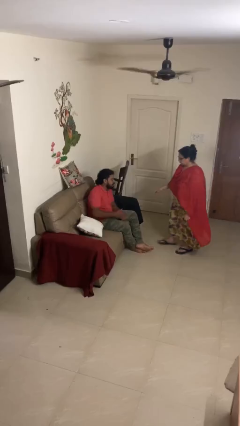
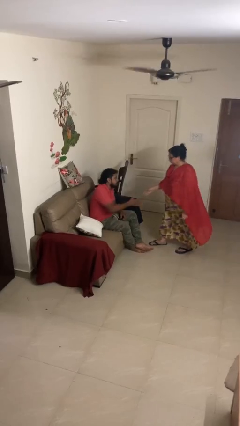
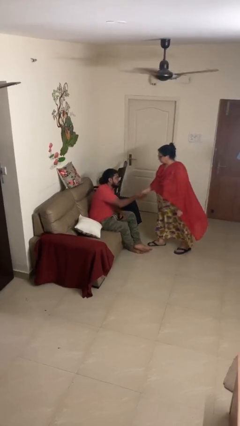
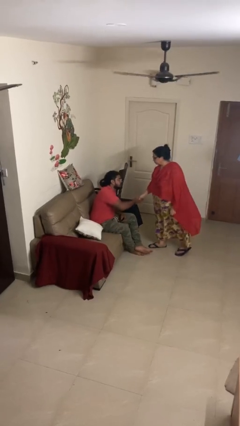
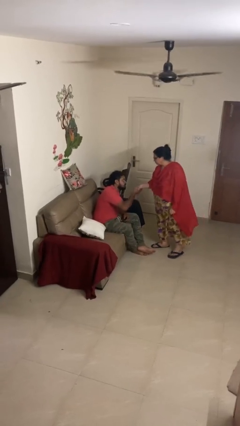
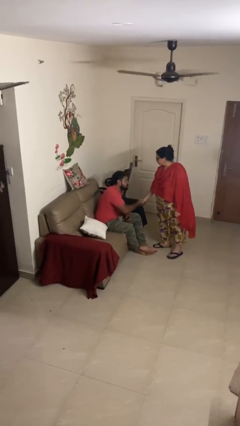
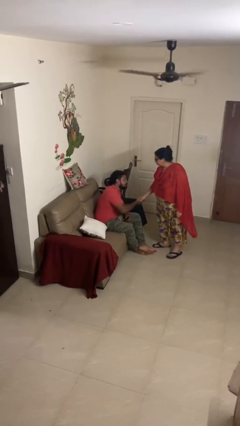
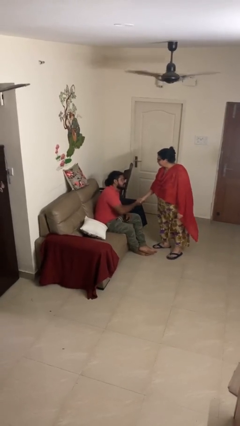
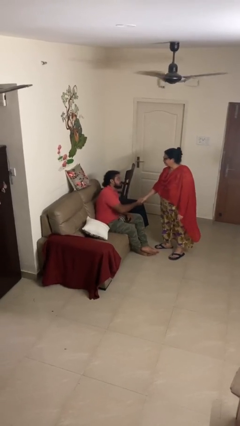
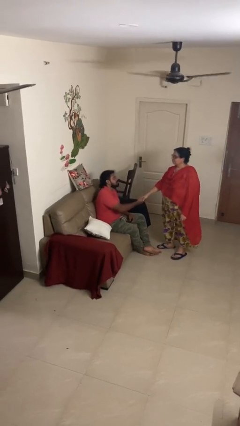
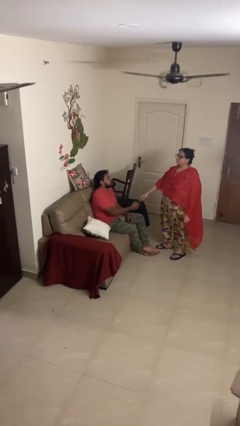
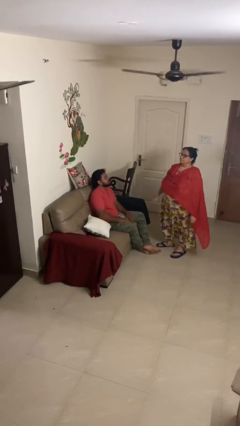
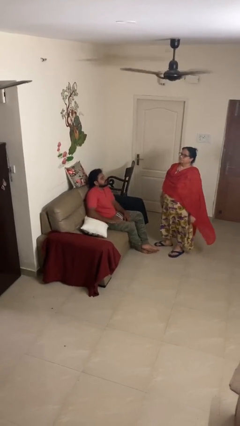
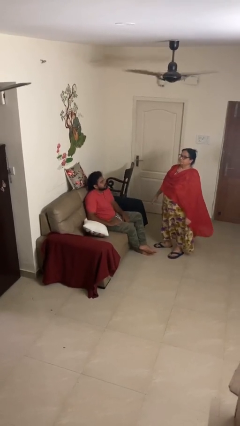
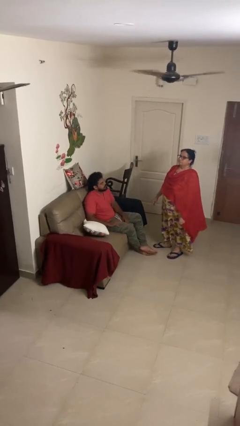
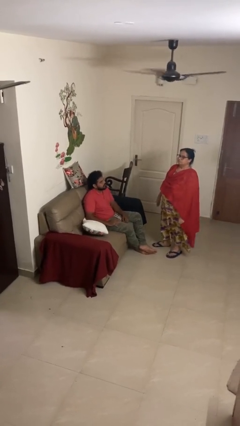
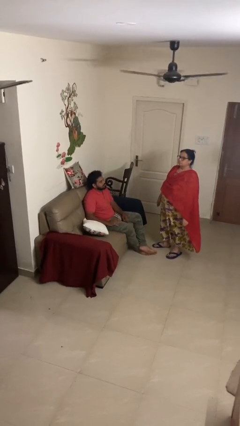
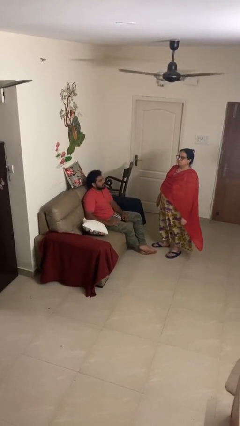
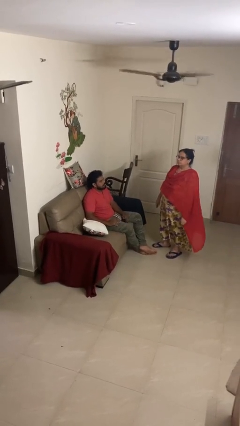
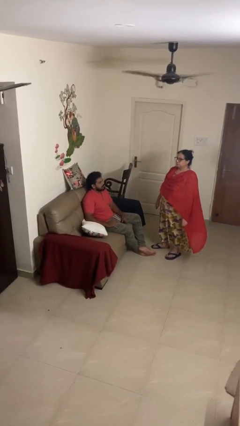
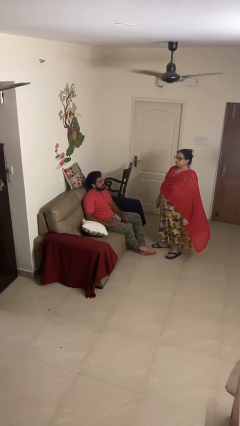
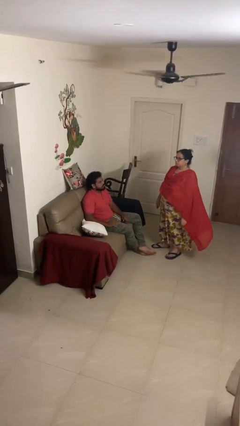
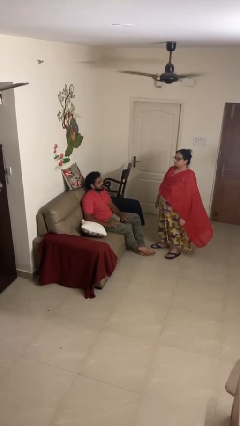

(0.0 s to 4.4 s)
person shakes hand

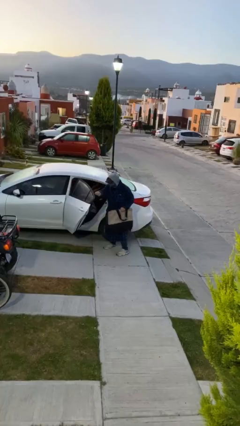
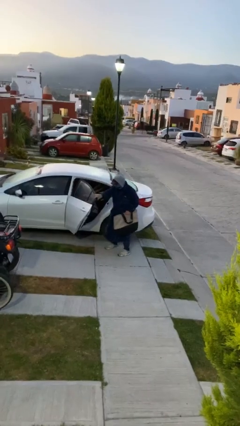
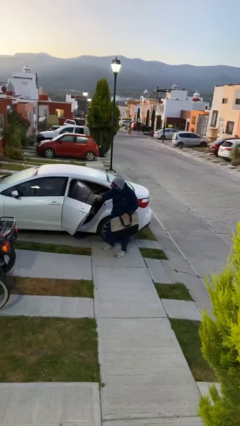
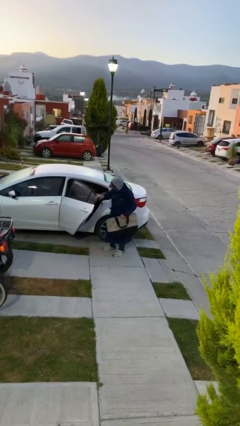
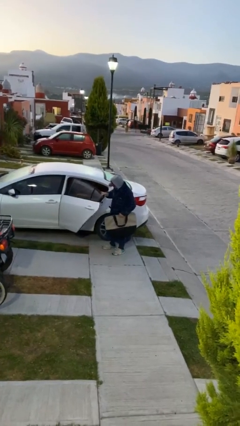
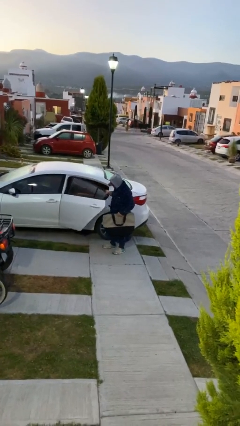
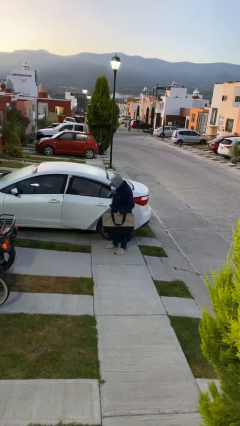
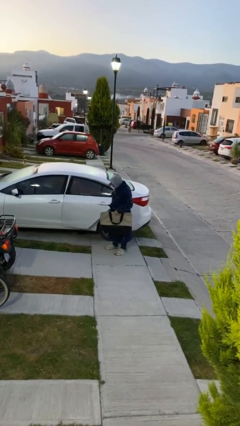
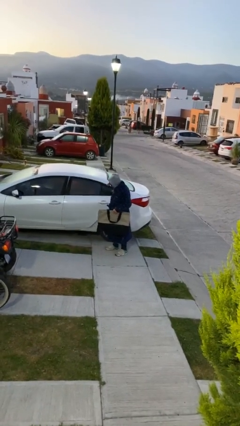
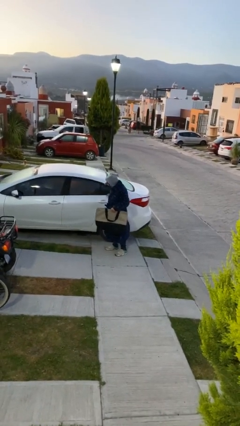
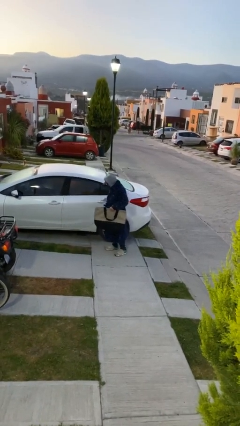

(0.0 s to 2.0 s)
person closes car door

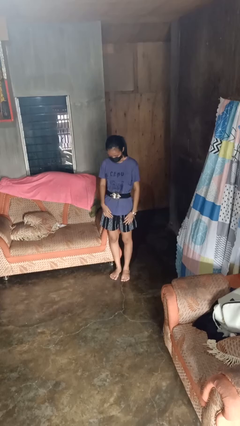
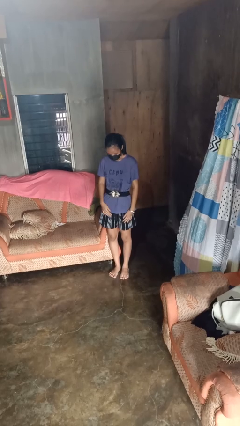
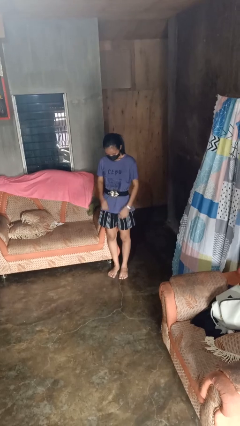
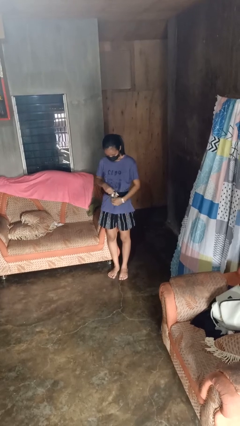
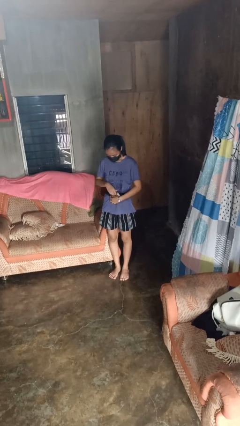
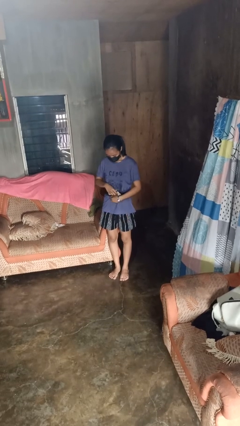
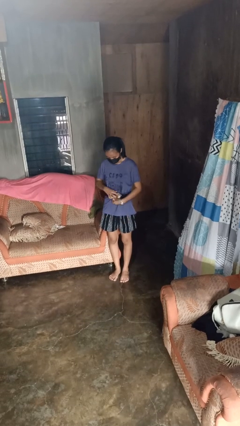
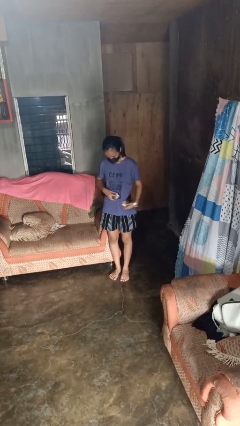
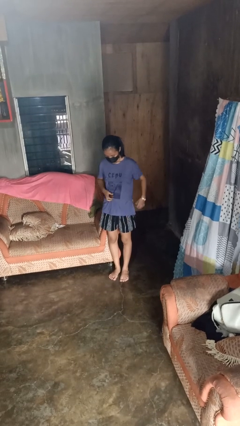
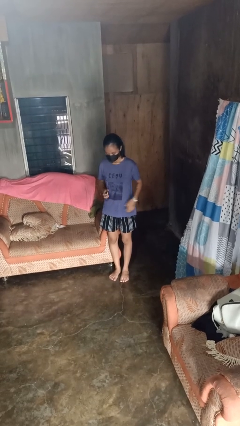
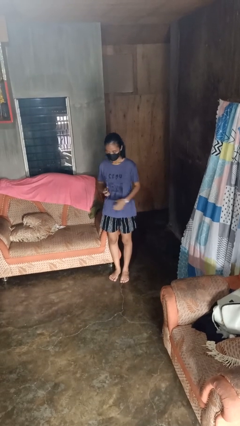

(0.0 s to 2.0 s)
person takes off belt

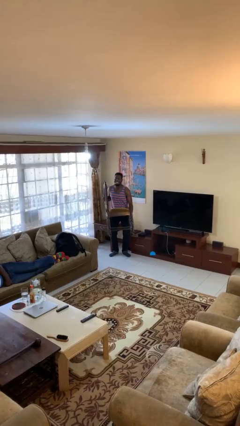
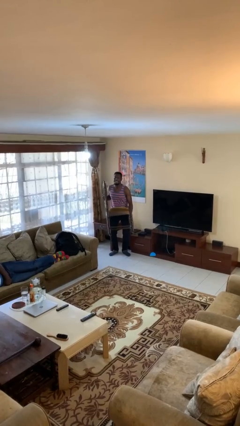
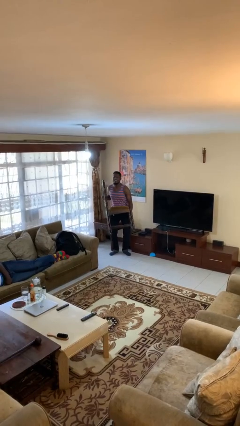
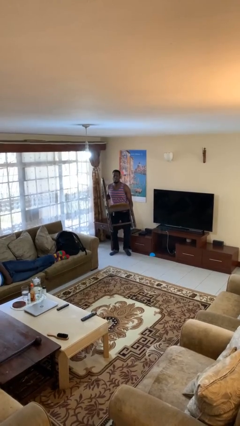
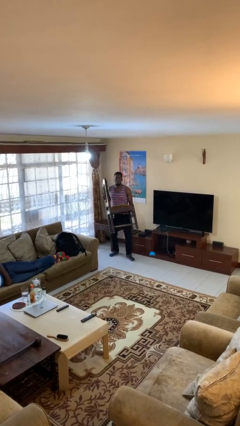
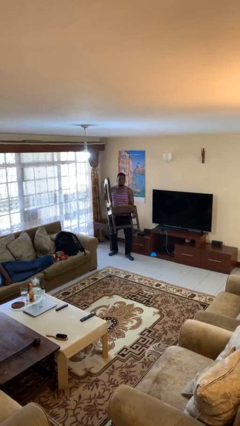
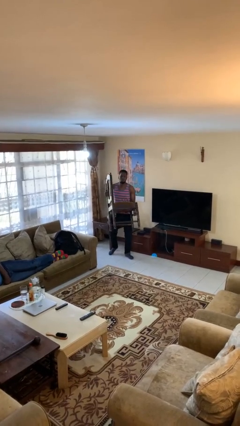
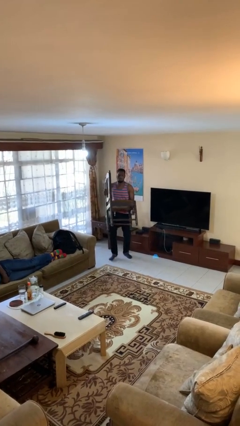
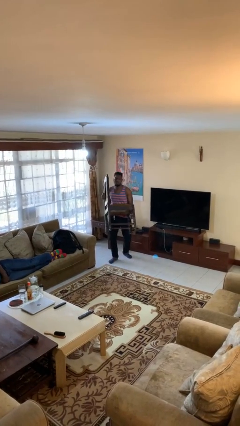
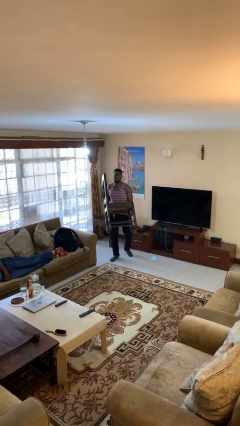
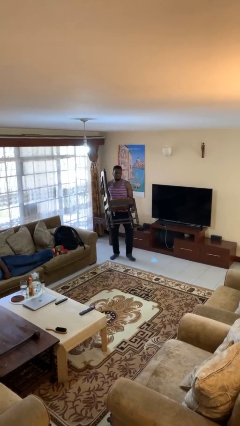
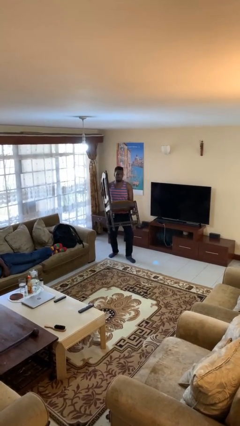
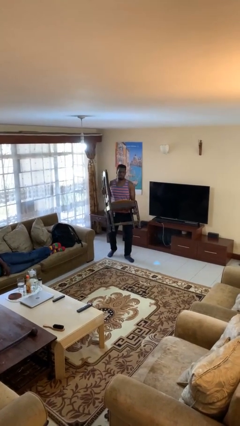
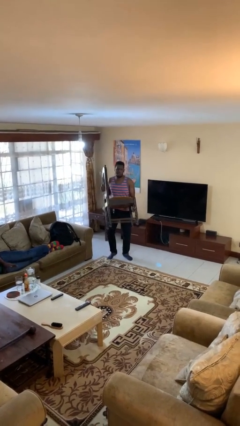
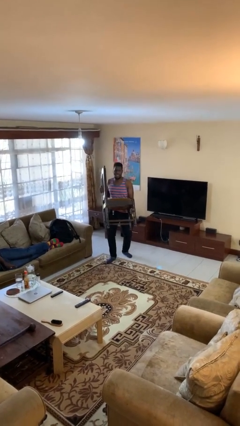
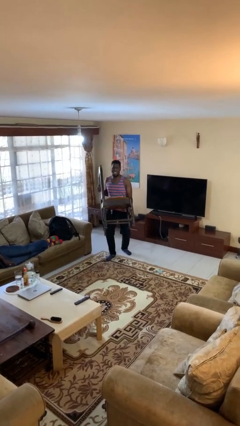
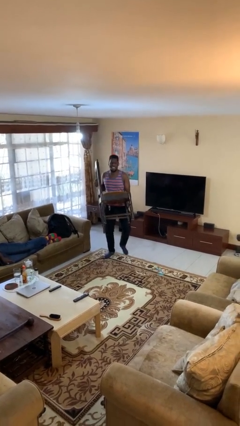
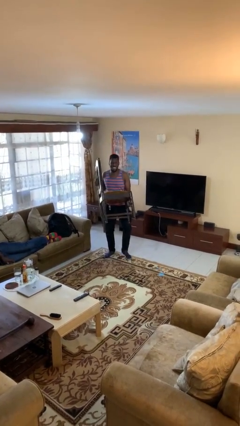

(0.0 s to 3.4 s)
person carries heavy object

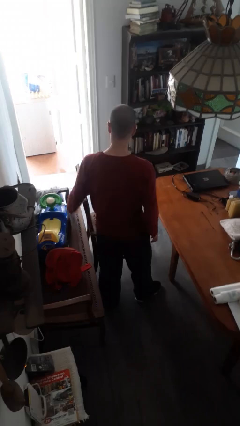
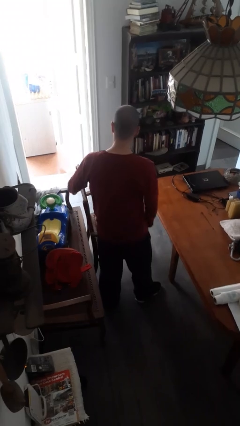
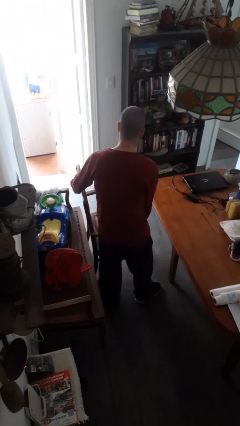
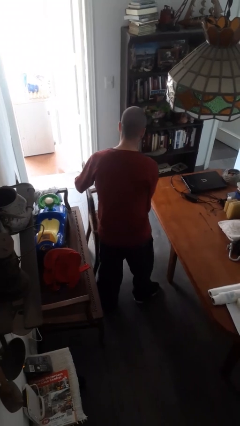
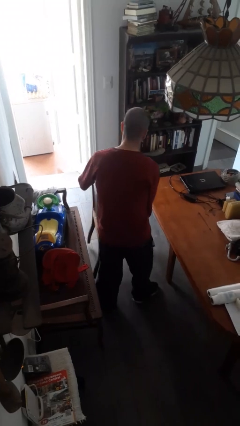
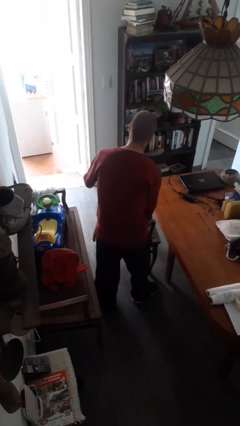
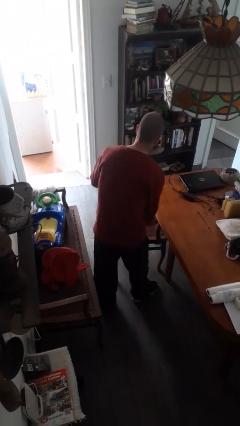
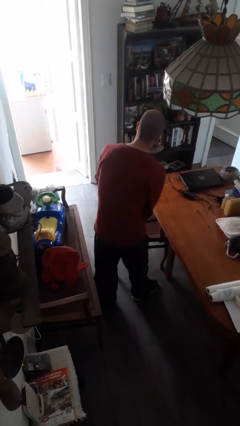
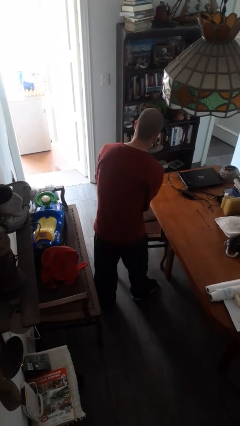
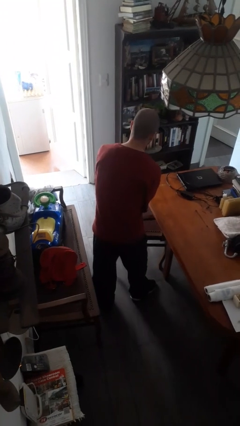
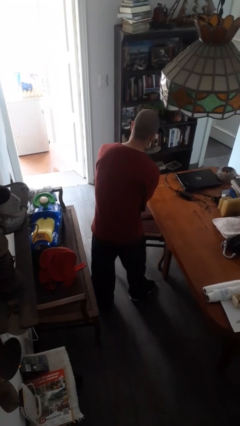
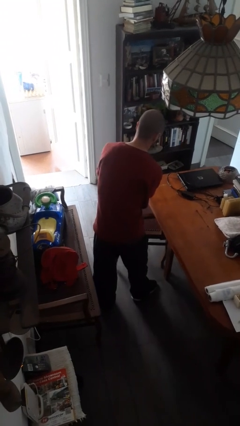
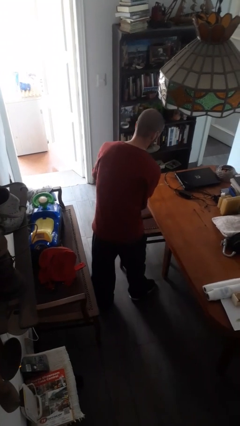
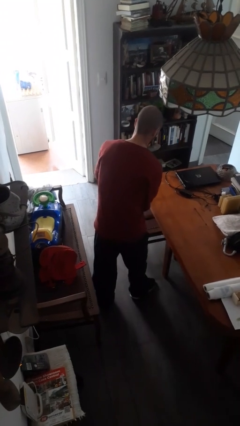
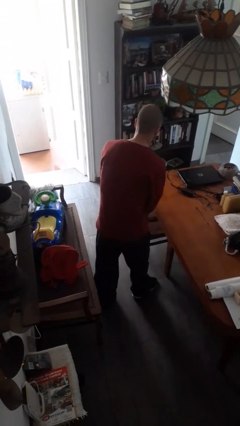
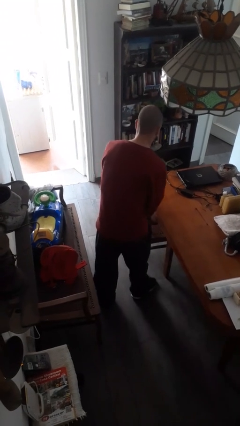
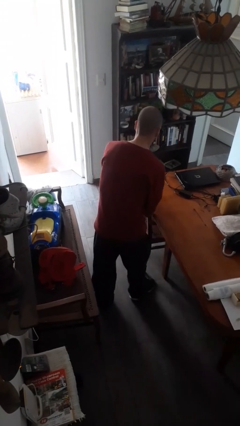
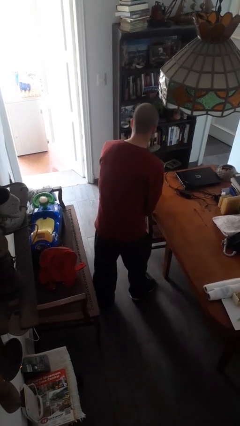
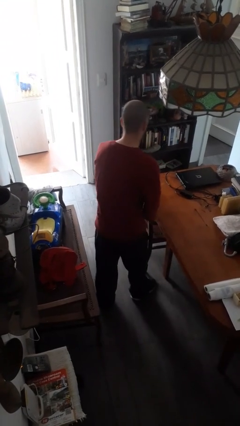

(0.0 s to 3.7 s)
person pushes in chair

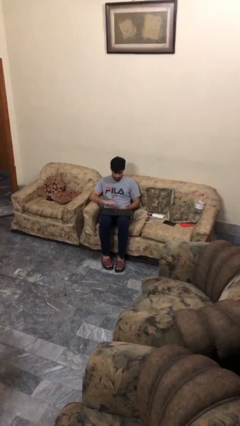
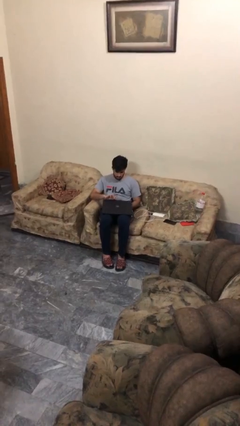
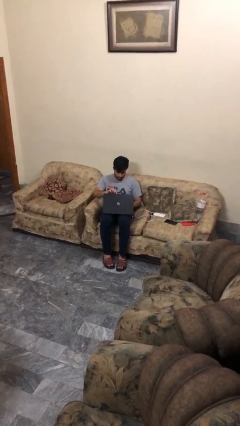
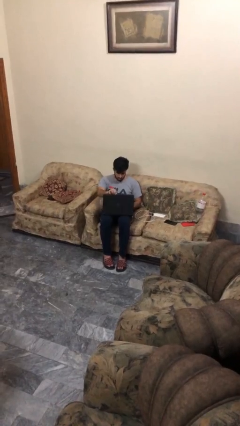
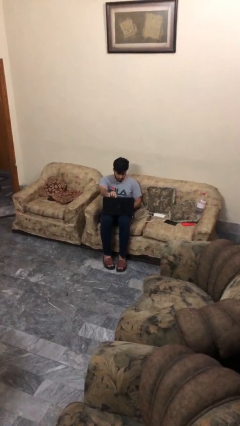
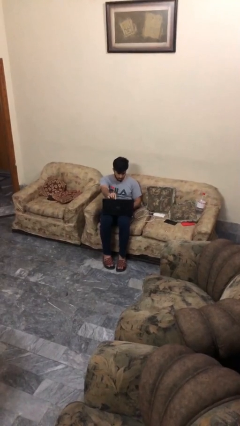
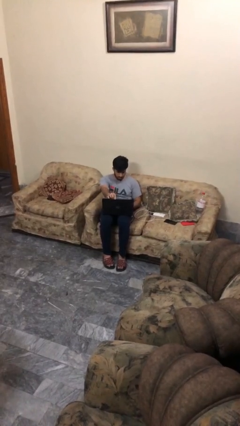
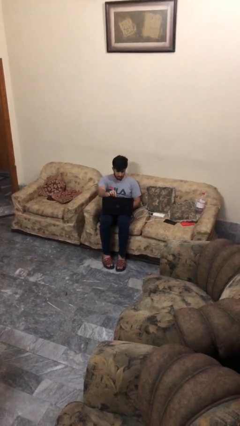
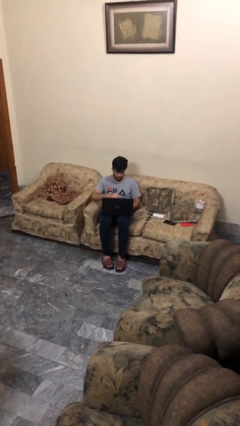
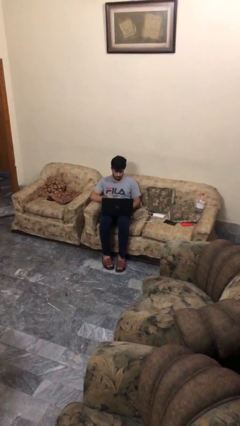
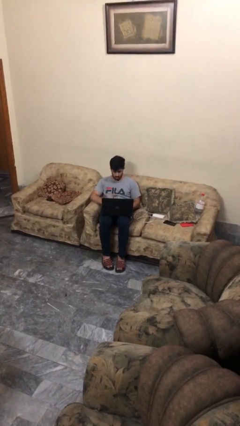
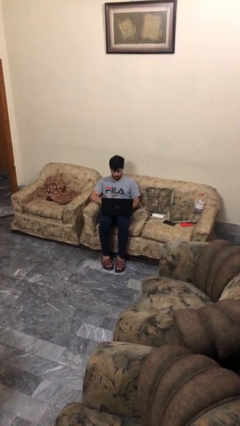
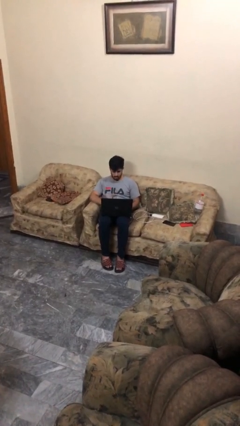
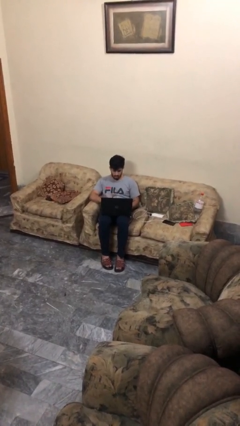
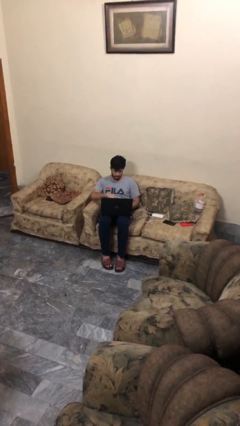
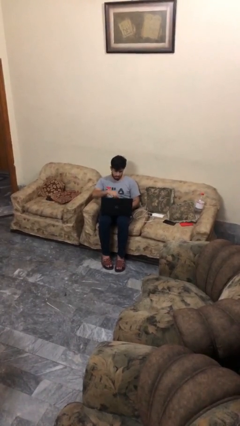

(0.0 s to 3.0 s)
person opens laptop
